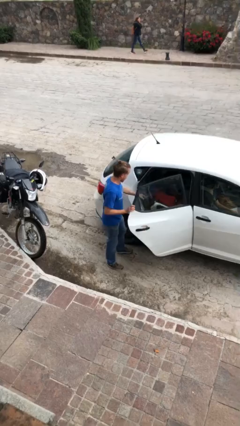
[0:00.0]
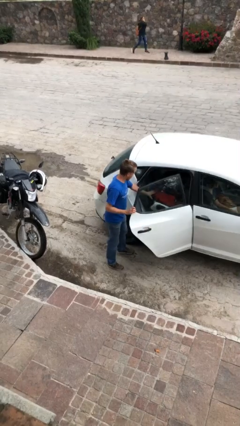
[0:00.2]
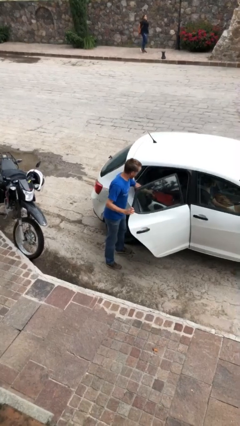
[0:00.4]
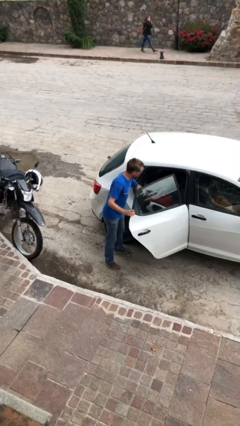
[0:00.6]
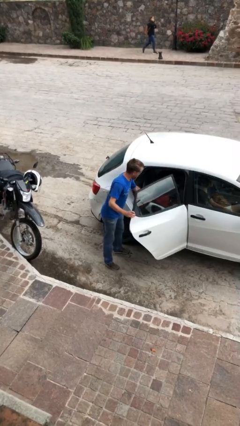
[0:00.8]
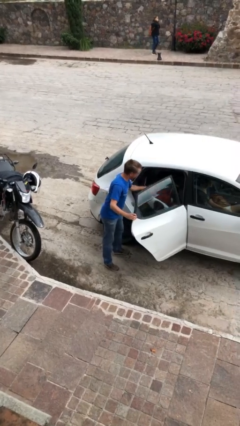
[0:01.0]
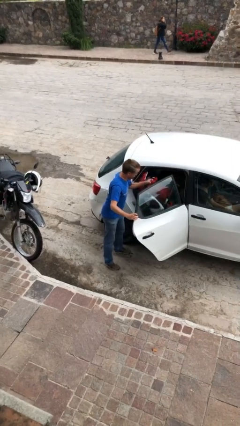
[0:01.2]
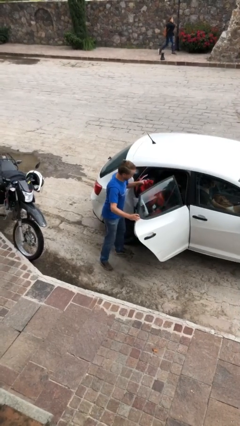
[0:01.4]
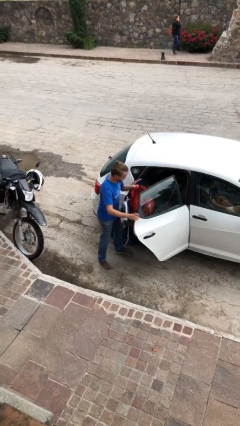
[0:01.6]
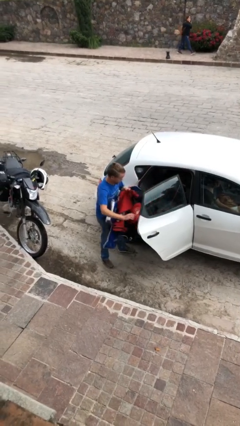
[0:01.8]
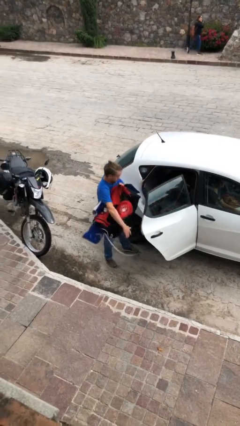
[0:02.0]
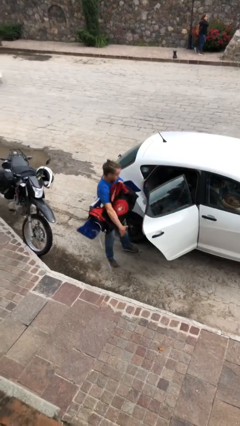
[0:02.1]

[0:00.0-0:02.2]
person unloads car

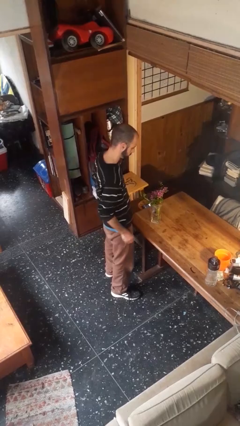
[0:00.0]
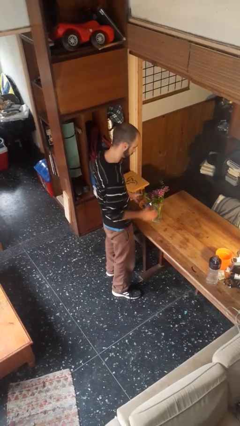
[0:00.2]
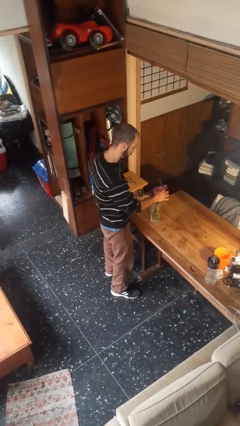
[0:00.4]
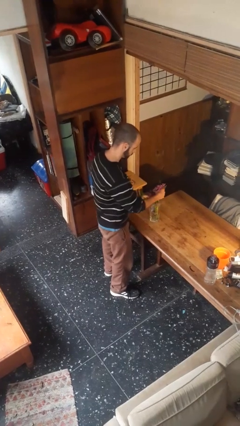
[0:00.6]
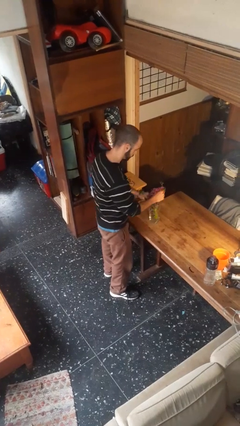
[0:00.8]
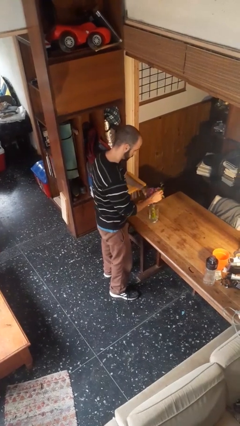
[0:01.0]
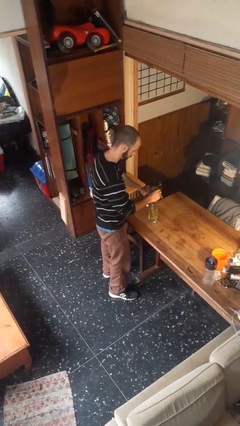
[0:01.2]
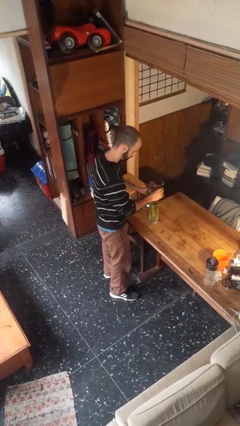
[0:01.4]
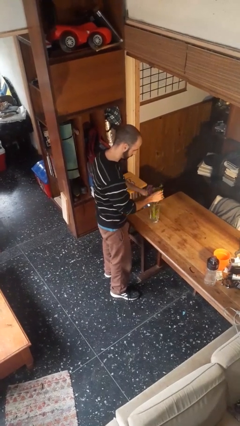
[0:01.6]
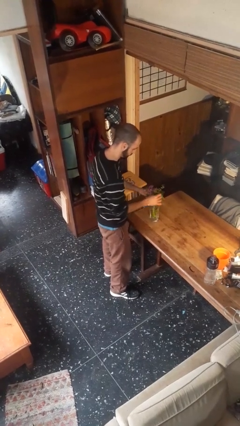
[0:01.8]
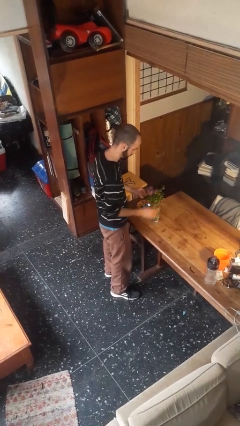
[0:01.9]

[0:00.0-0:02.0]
person arranges flowers in vase

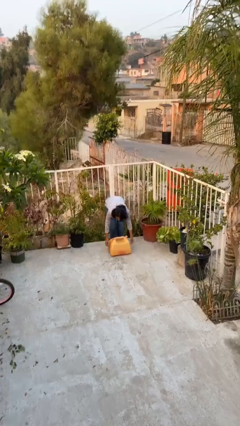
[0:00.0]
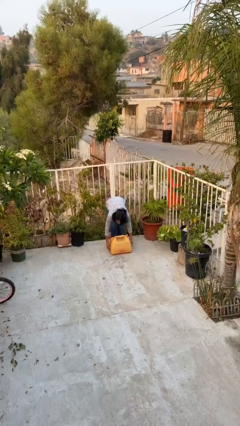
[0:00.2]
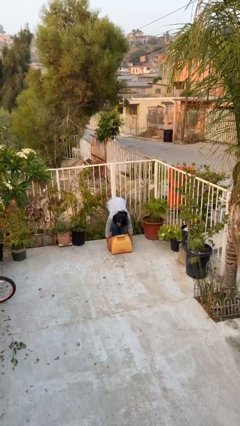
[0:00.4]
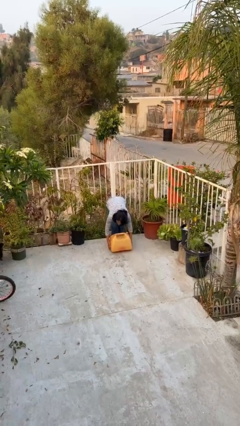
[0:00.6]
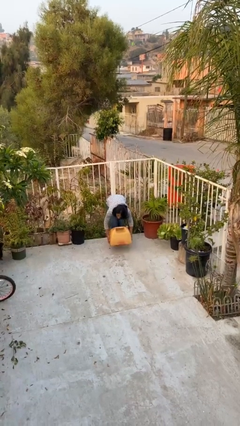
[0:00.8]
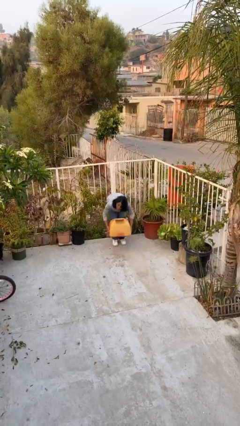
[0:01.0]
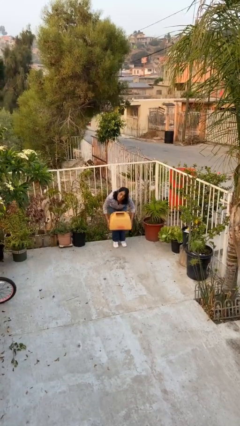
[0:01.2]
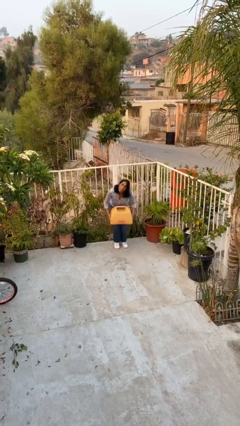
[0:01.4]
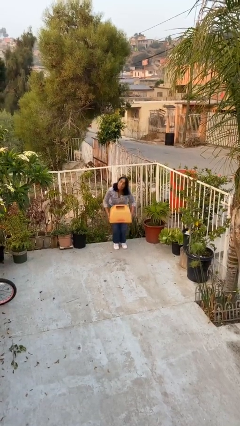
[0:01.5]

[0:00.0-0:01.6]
person picks up object from floor

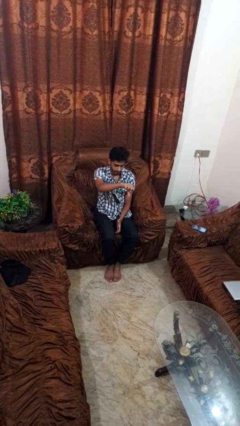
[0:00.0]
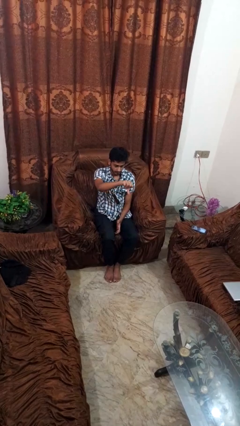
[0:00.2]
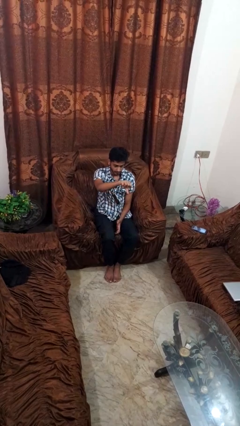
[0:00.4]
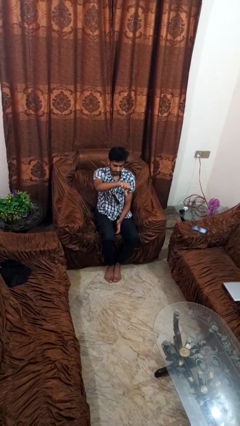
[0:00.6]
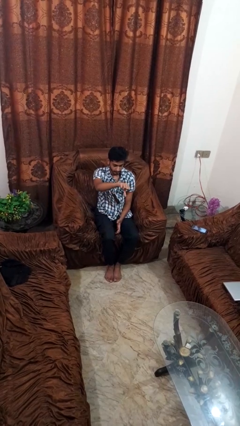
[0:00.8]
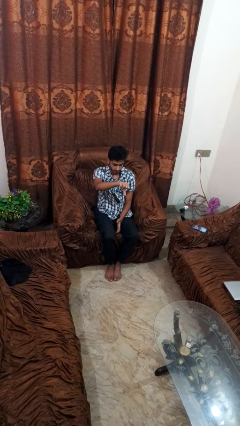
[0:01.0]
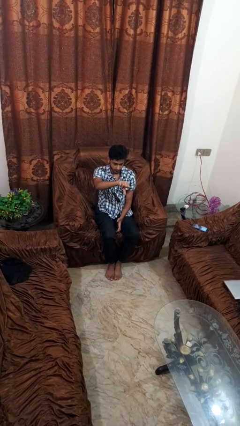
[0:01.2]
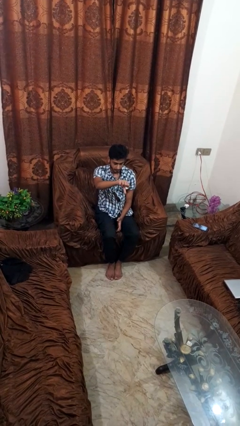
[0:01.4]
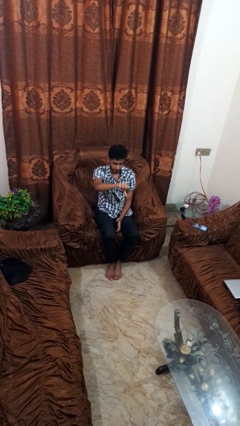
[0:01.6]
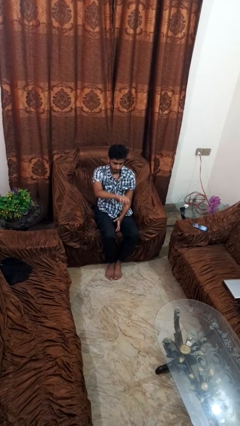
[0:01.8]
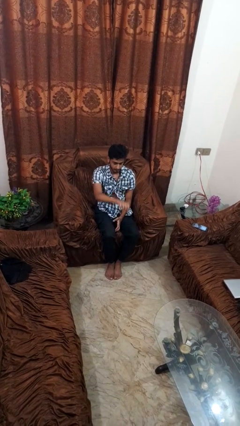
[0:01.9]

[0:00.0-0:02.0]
person gestures thumbs down

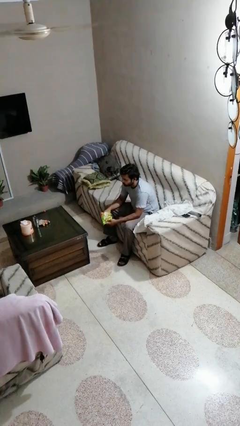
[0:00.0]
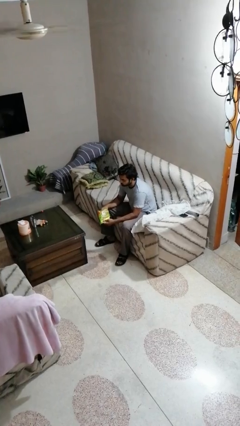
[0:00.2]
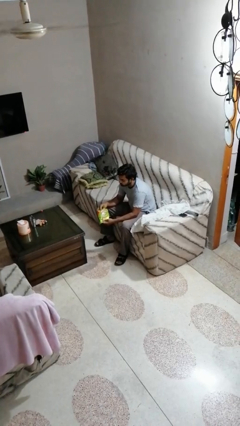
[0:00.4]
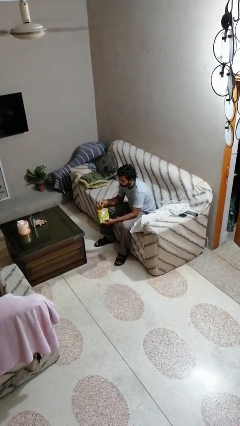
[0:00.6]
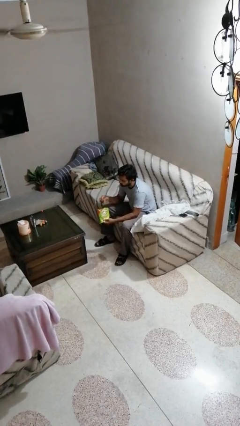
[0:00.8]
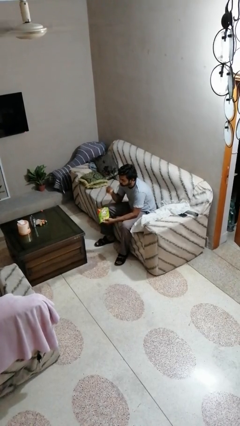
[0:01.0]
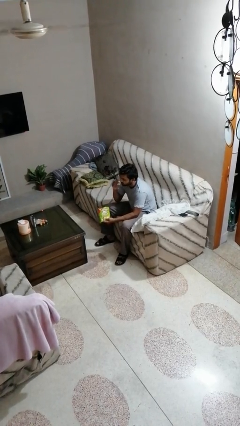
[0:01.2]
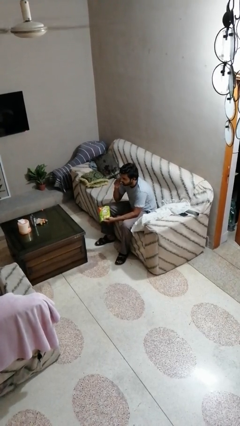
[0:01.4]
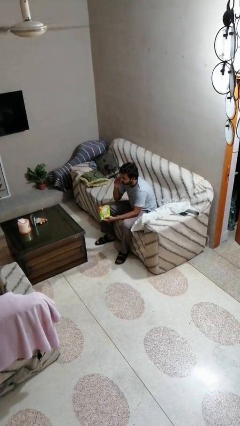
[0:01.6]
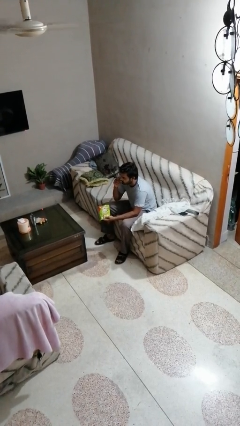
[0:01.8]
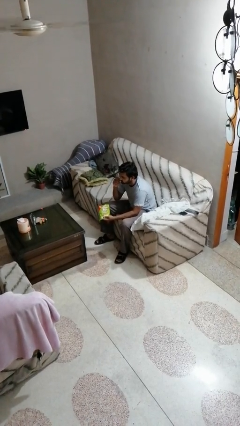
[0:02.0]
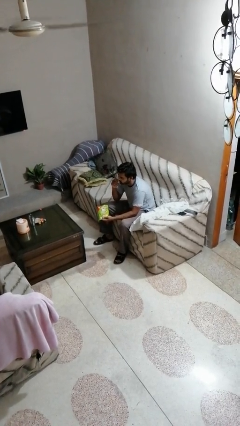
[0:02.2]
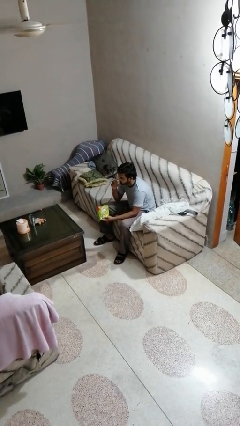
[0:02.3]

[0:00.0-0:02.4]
person eats snack from bag

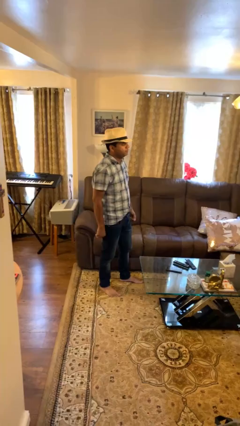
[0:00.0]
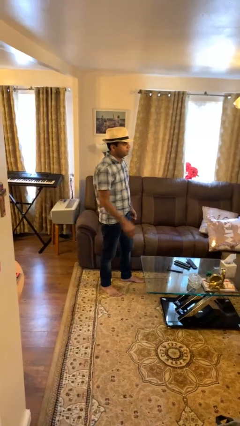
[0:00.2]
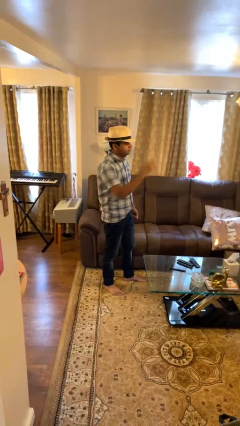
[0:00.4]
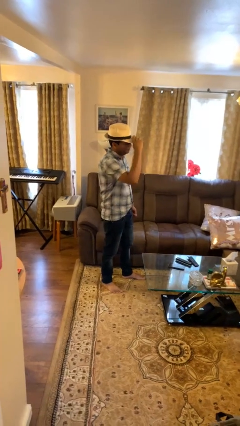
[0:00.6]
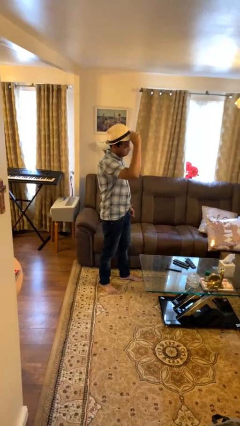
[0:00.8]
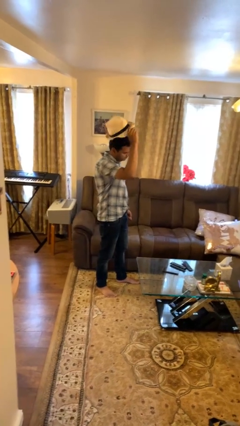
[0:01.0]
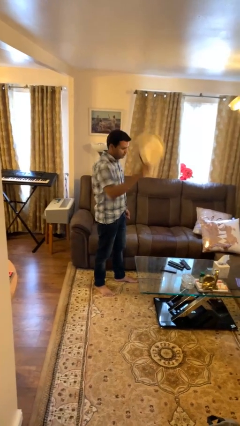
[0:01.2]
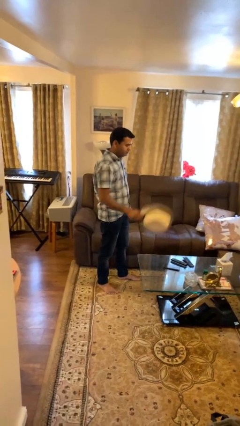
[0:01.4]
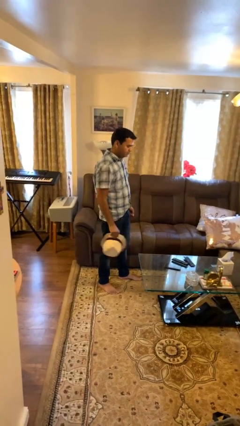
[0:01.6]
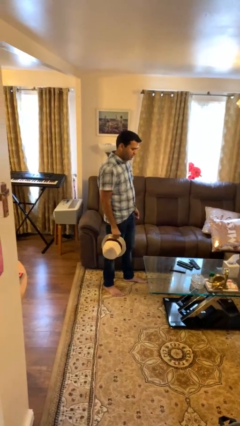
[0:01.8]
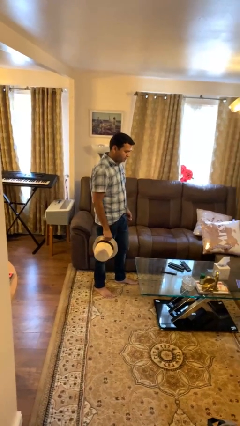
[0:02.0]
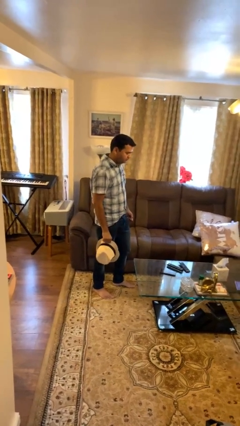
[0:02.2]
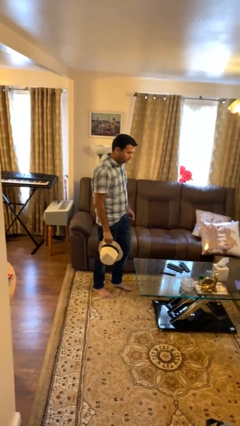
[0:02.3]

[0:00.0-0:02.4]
person takes off hat

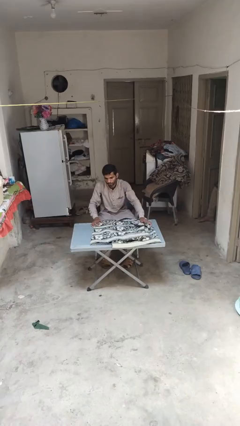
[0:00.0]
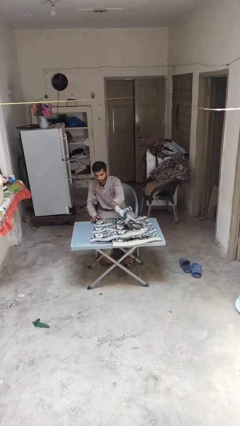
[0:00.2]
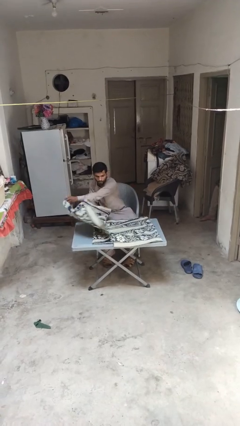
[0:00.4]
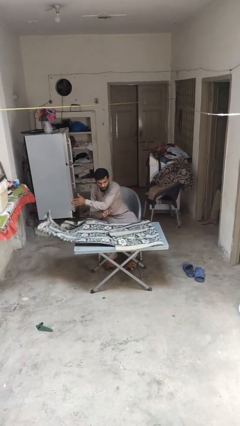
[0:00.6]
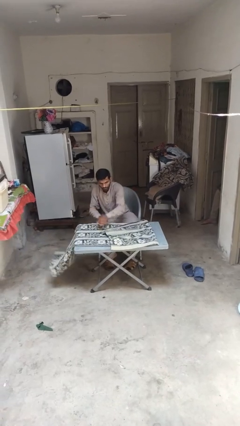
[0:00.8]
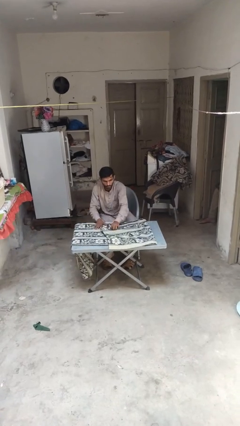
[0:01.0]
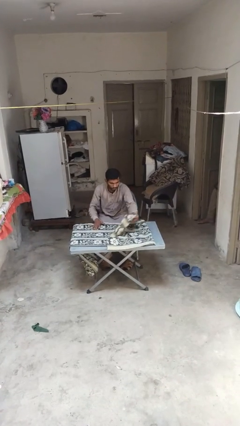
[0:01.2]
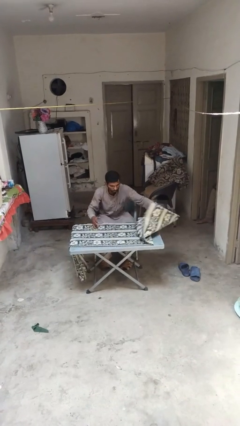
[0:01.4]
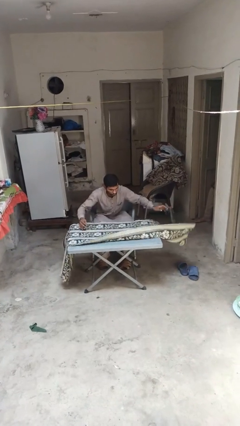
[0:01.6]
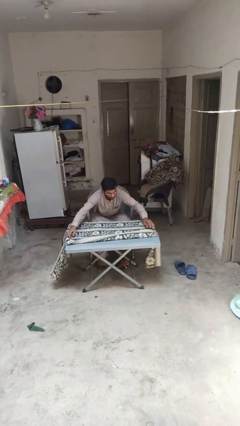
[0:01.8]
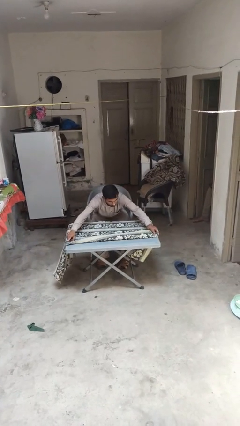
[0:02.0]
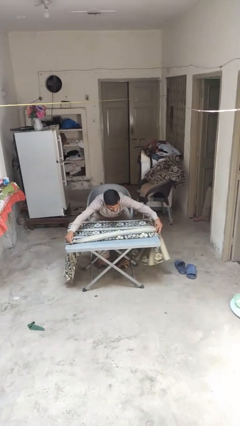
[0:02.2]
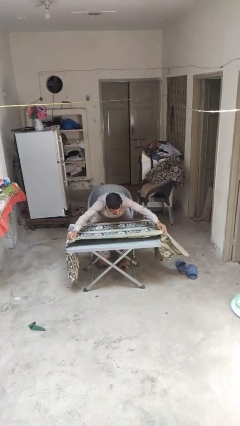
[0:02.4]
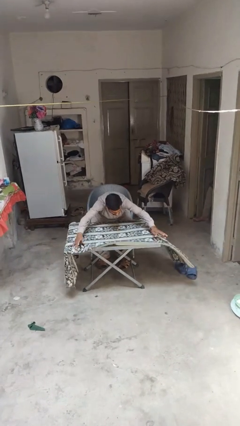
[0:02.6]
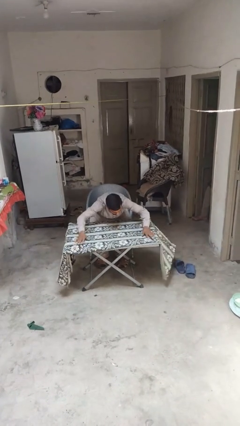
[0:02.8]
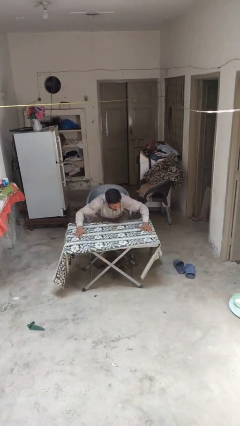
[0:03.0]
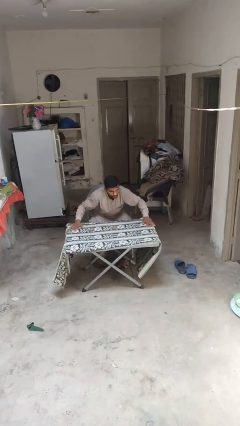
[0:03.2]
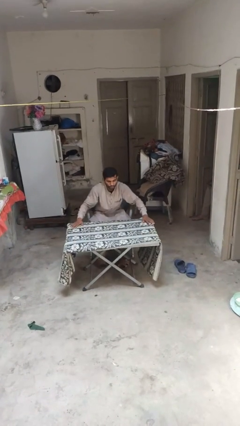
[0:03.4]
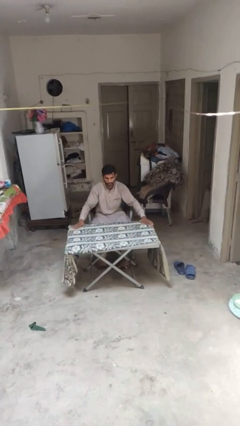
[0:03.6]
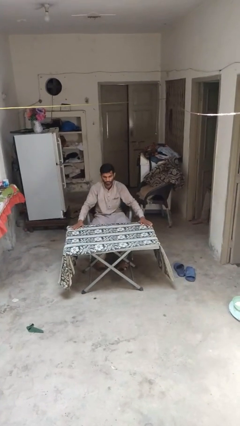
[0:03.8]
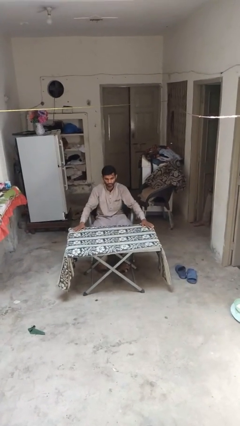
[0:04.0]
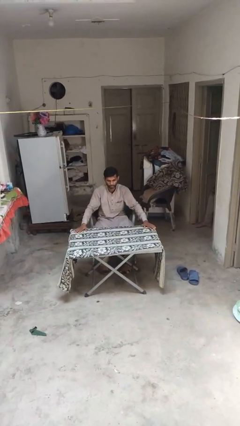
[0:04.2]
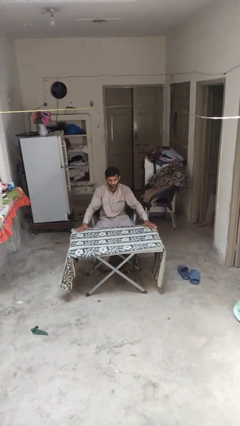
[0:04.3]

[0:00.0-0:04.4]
person spreads tablecloth
